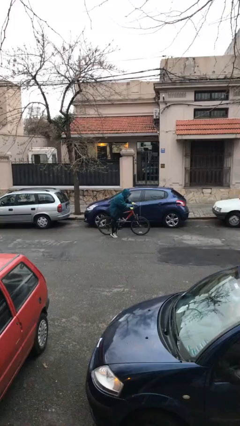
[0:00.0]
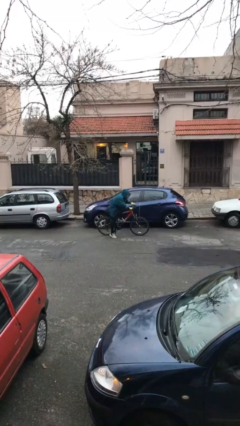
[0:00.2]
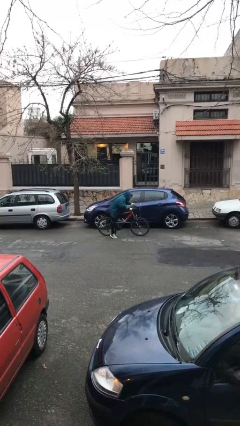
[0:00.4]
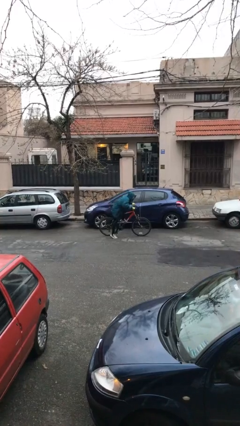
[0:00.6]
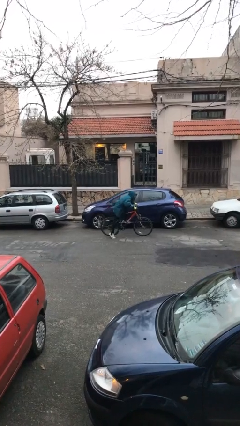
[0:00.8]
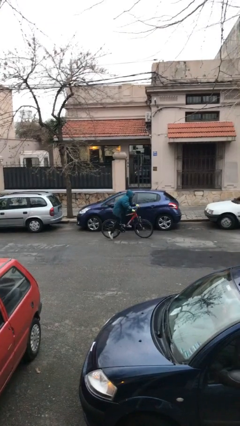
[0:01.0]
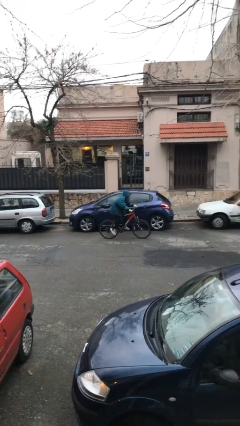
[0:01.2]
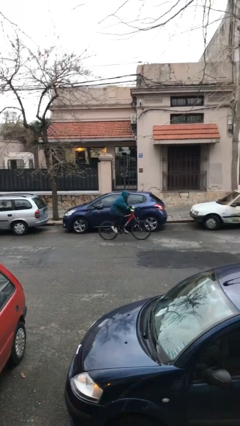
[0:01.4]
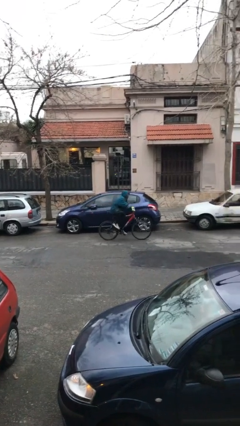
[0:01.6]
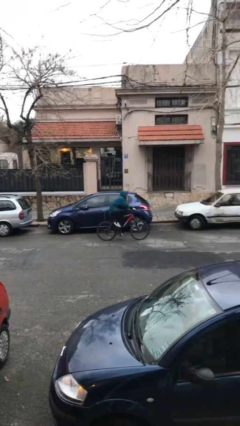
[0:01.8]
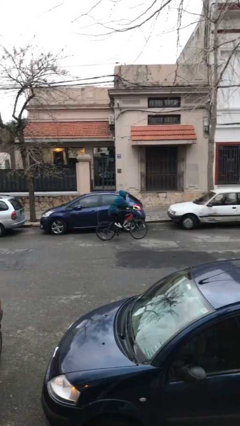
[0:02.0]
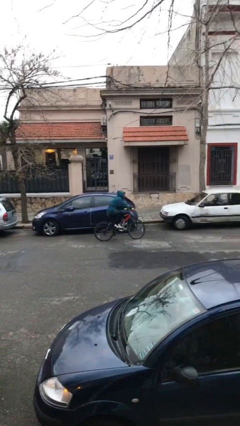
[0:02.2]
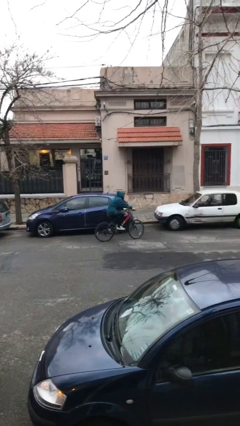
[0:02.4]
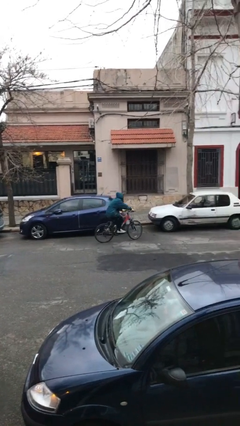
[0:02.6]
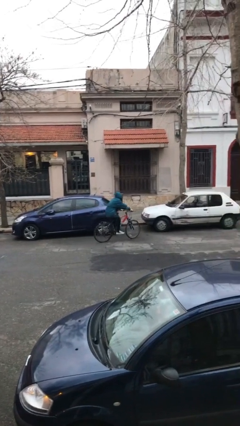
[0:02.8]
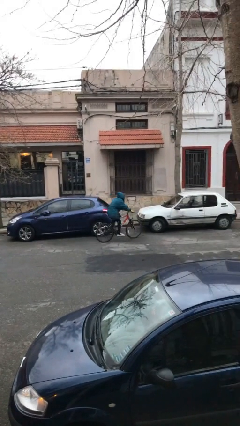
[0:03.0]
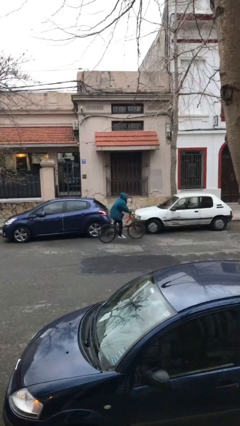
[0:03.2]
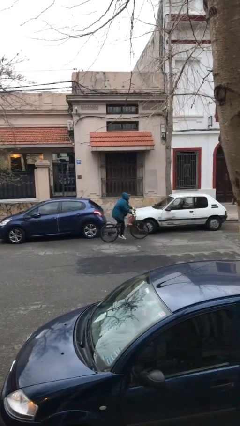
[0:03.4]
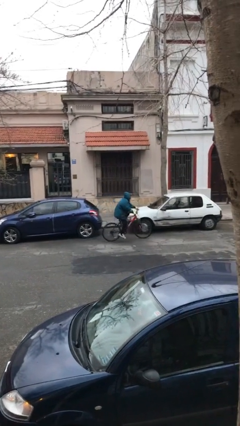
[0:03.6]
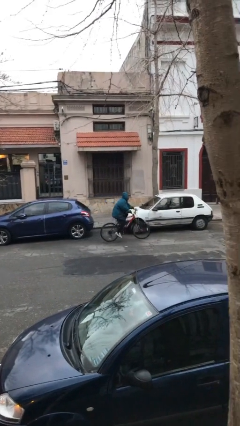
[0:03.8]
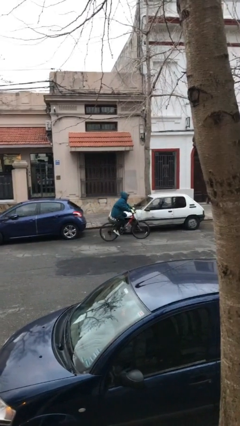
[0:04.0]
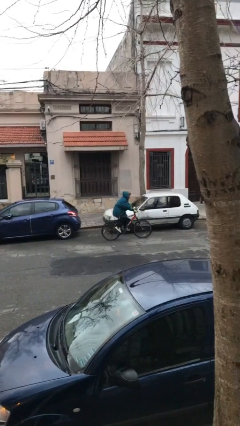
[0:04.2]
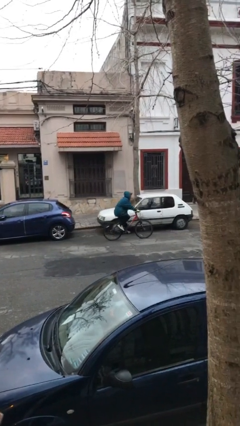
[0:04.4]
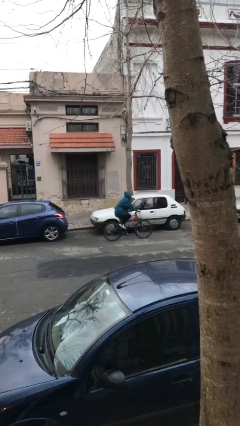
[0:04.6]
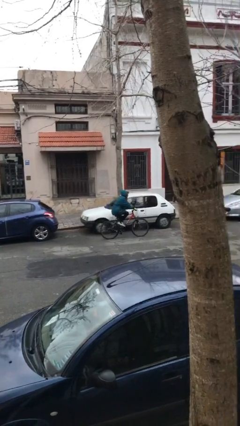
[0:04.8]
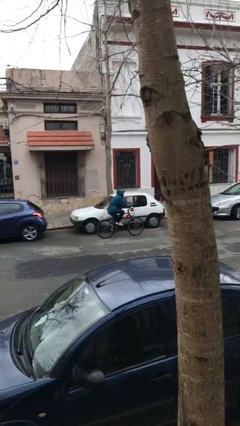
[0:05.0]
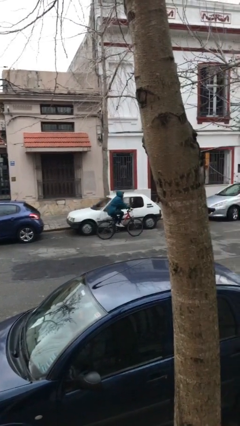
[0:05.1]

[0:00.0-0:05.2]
person rides bicycle

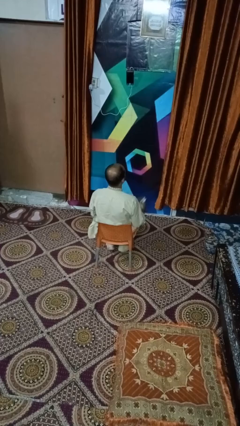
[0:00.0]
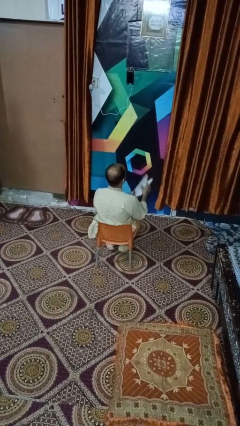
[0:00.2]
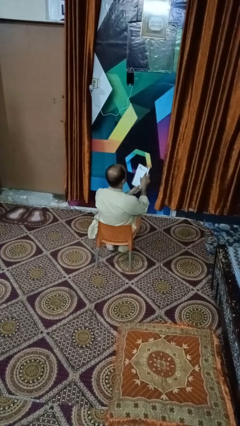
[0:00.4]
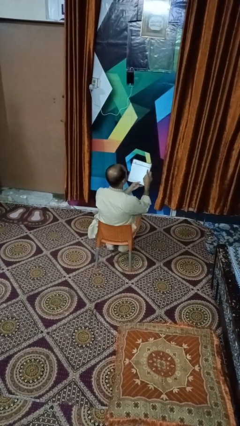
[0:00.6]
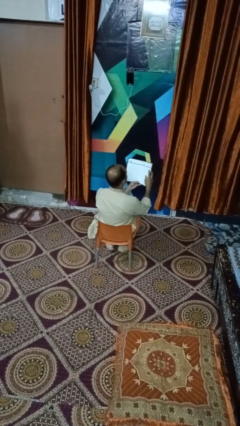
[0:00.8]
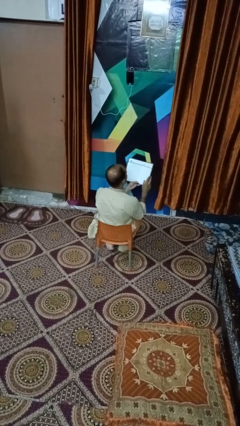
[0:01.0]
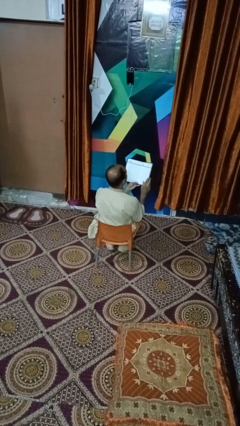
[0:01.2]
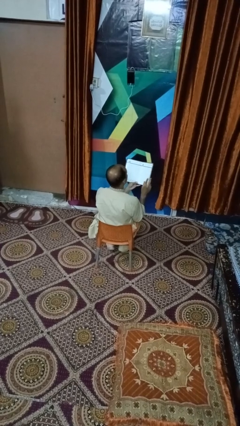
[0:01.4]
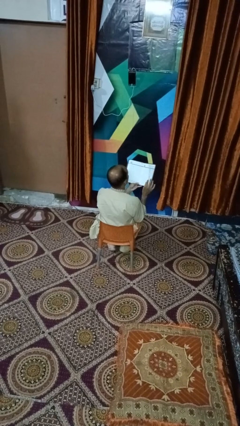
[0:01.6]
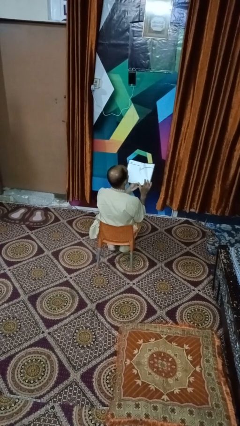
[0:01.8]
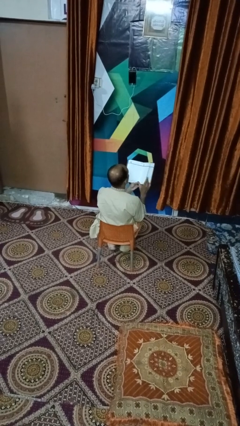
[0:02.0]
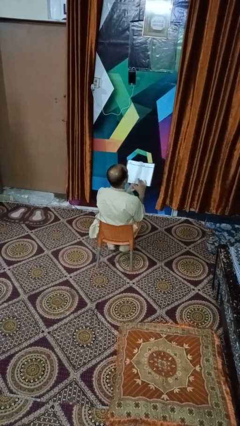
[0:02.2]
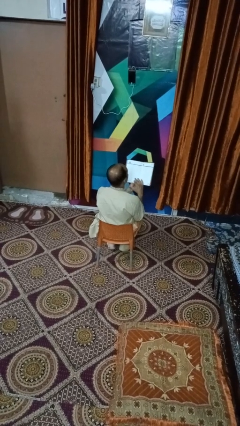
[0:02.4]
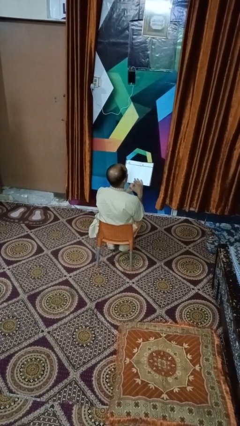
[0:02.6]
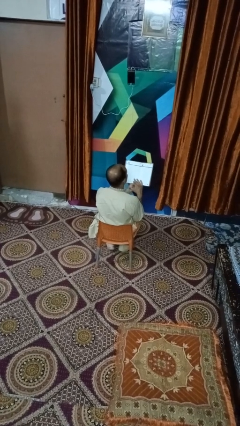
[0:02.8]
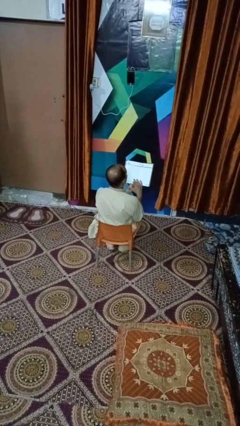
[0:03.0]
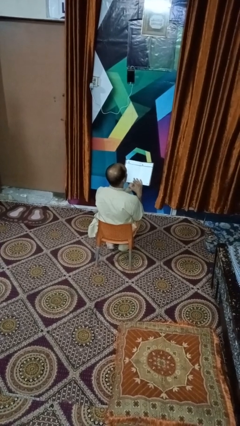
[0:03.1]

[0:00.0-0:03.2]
person reads magazine

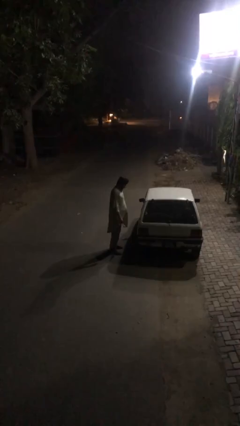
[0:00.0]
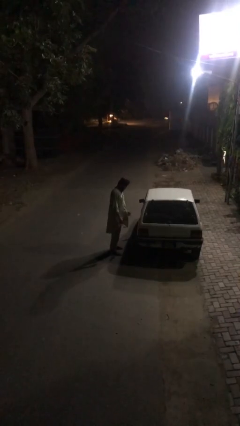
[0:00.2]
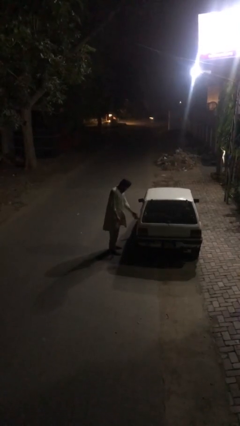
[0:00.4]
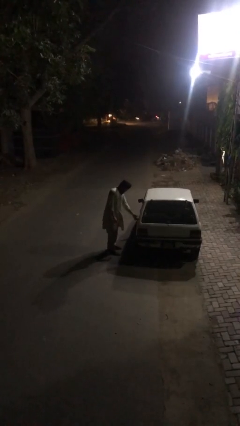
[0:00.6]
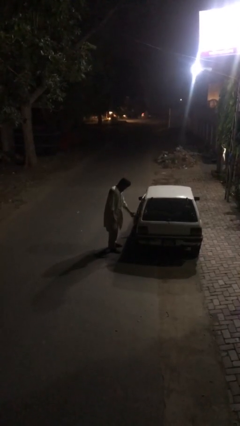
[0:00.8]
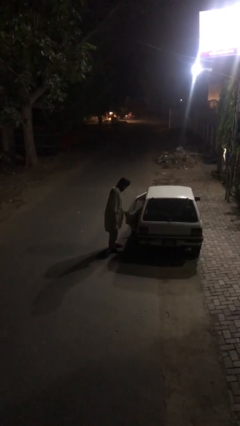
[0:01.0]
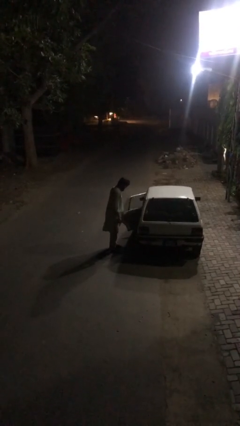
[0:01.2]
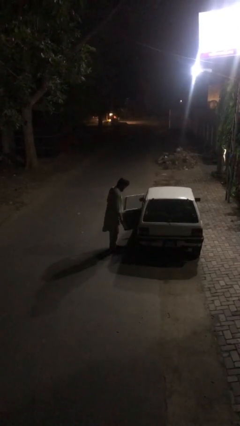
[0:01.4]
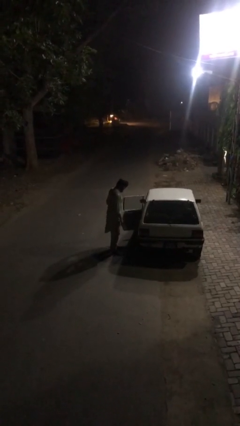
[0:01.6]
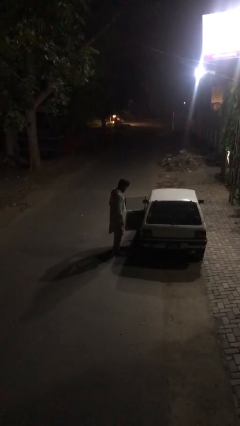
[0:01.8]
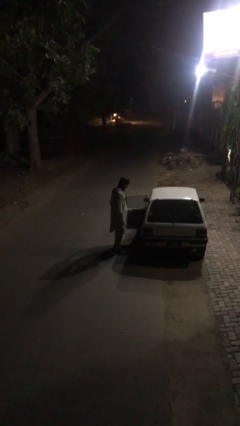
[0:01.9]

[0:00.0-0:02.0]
person opens car door

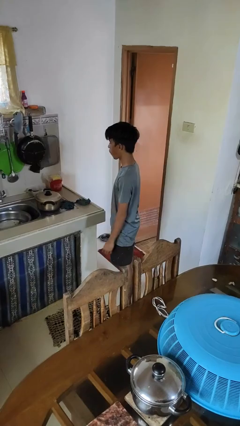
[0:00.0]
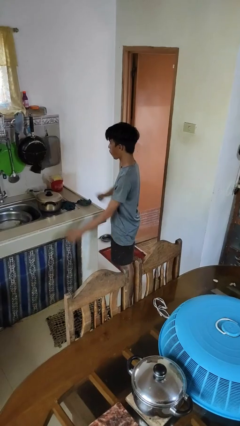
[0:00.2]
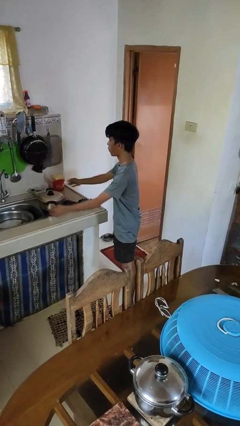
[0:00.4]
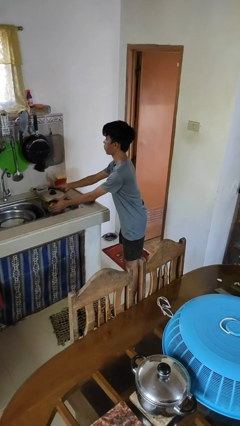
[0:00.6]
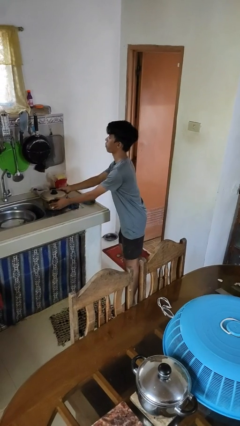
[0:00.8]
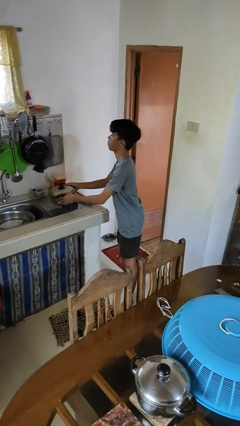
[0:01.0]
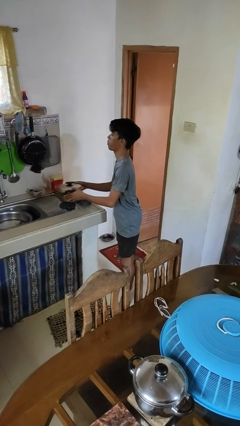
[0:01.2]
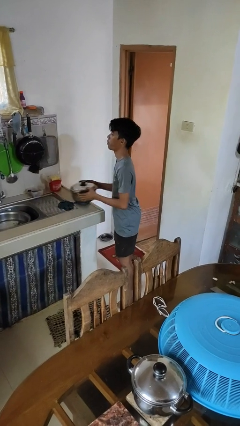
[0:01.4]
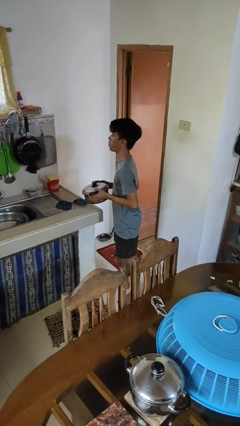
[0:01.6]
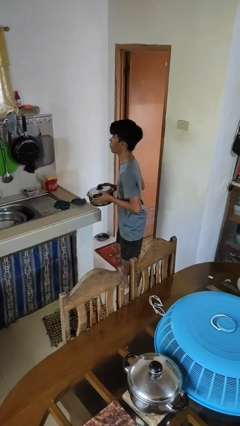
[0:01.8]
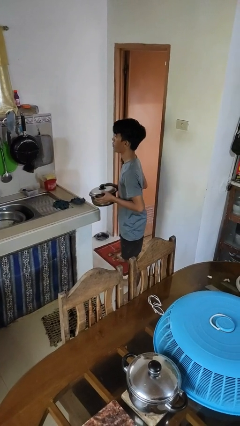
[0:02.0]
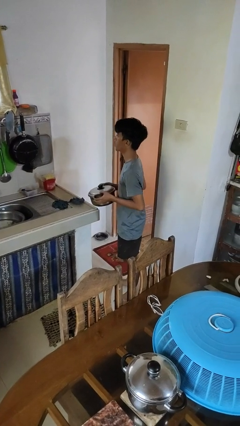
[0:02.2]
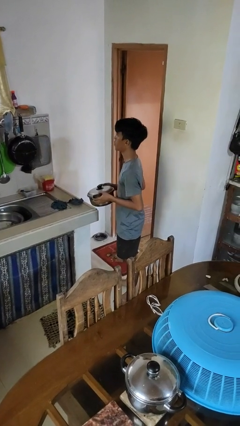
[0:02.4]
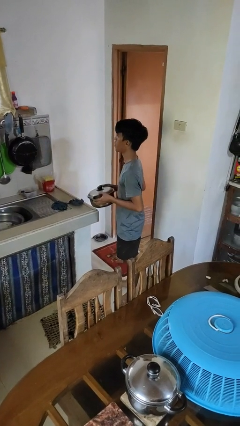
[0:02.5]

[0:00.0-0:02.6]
person picks up object from countertop

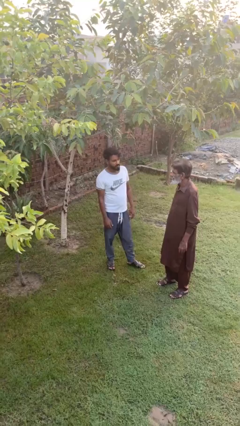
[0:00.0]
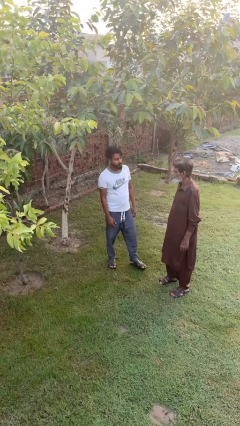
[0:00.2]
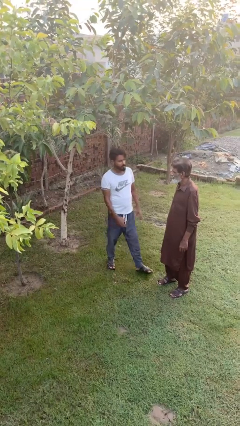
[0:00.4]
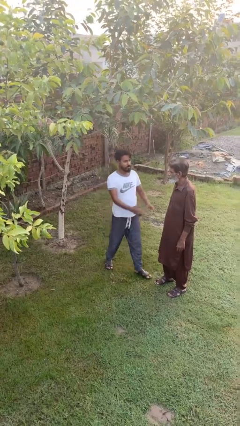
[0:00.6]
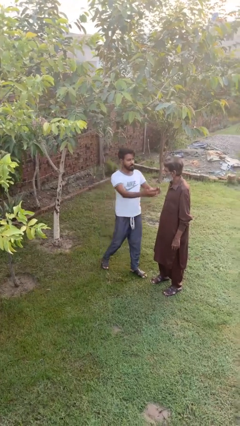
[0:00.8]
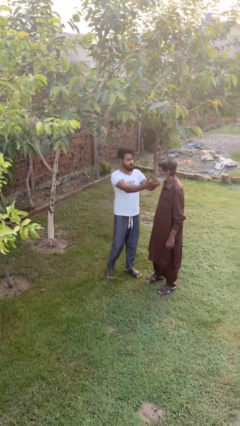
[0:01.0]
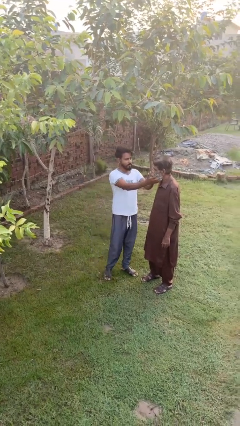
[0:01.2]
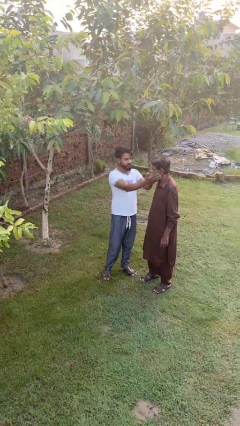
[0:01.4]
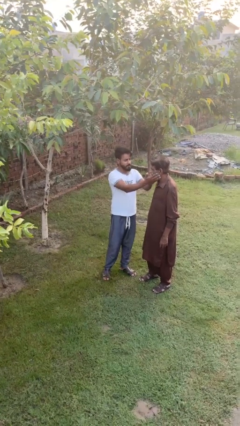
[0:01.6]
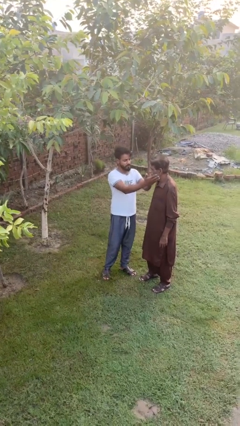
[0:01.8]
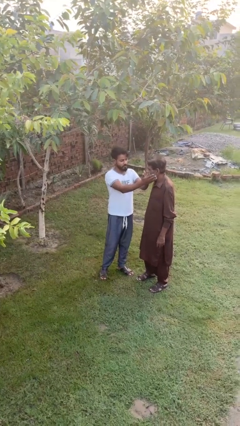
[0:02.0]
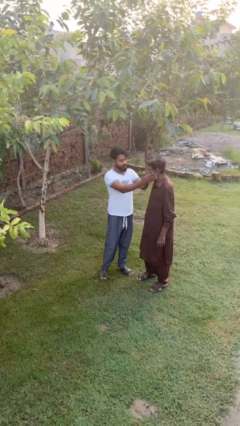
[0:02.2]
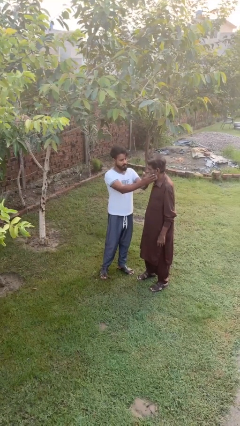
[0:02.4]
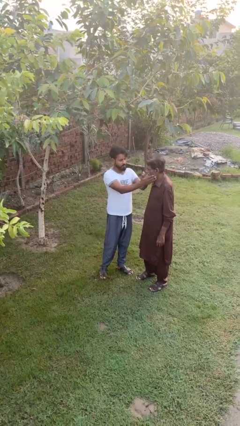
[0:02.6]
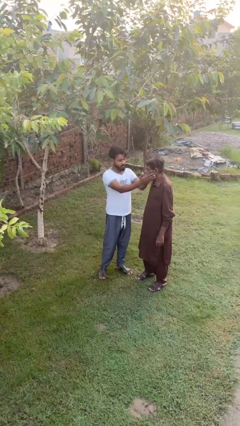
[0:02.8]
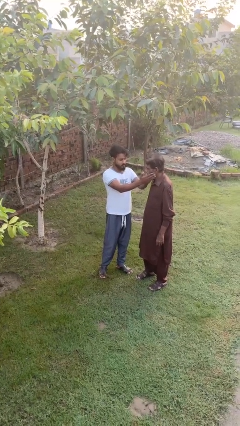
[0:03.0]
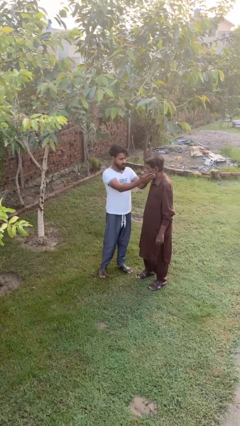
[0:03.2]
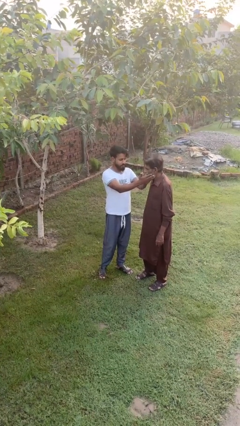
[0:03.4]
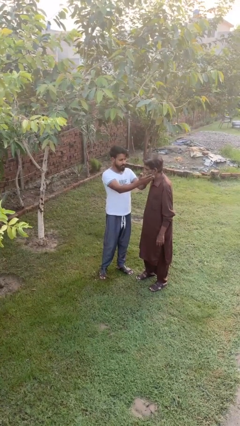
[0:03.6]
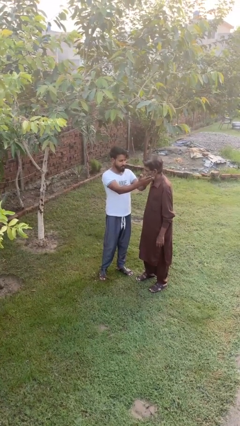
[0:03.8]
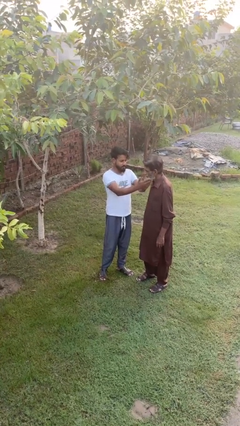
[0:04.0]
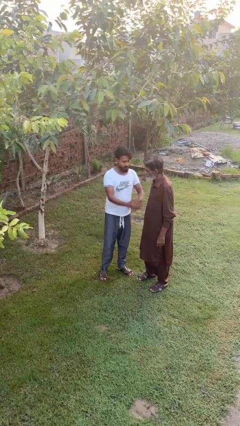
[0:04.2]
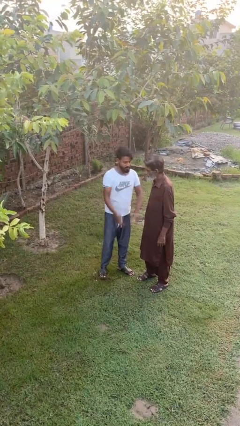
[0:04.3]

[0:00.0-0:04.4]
person touches face of person
